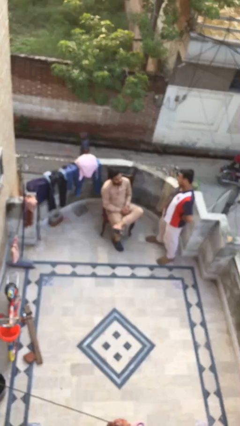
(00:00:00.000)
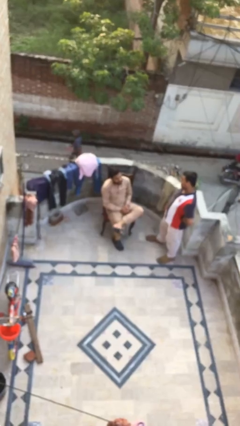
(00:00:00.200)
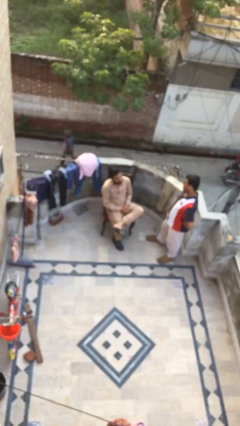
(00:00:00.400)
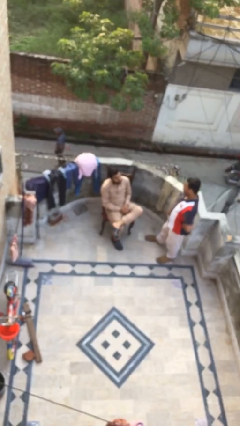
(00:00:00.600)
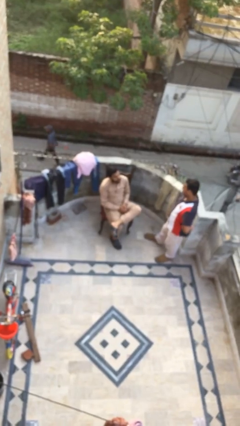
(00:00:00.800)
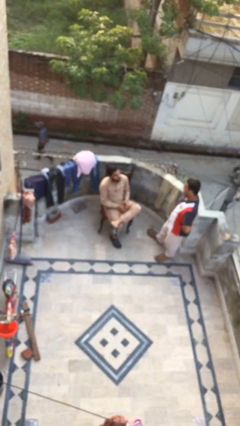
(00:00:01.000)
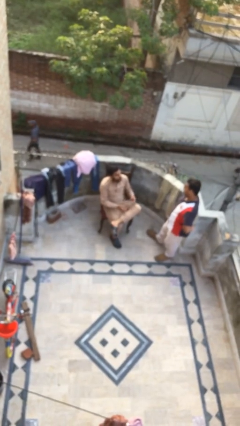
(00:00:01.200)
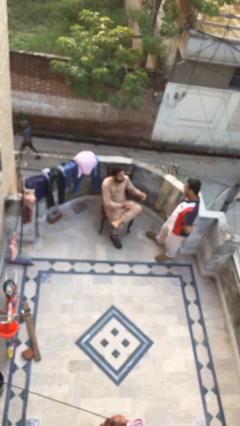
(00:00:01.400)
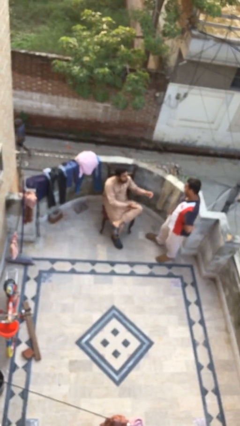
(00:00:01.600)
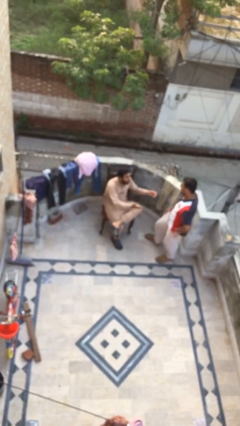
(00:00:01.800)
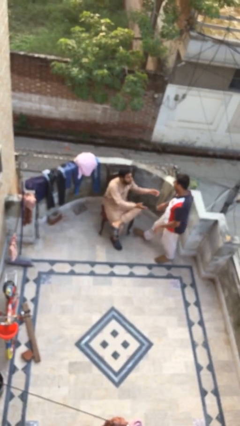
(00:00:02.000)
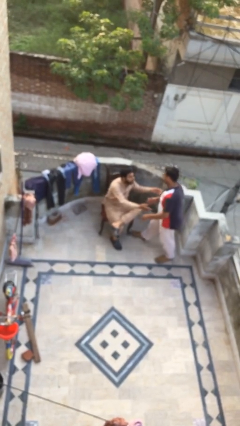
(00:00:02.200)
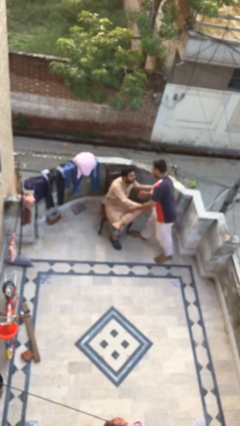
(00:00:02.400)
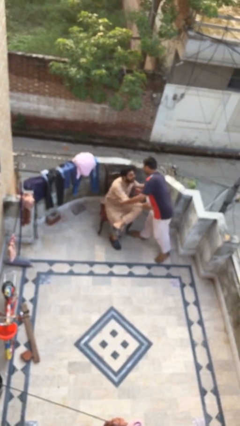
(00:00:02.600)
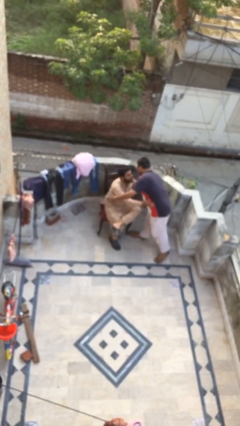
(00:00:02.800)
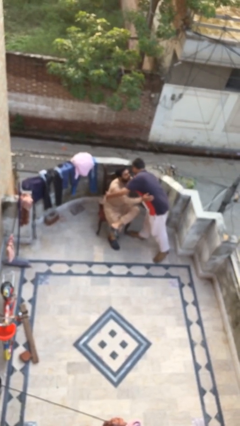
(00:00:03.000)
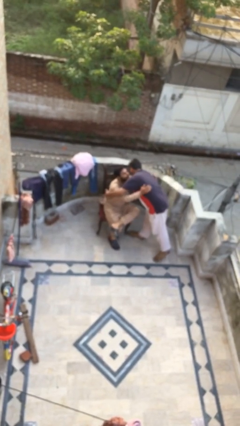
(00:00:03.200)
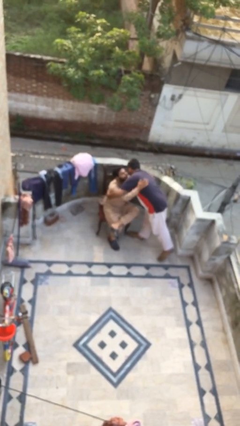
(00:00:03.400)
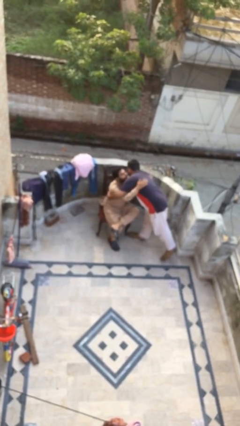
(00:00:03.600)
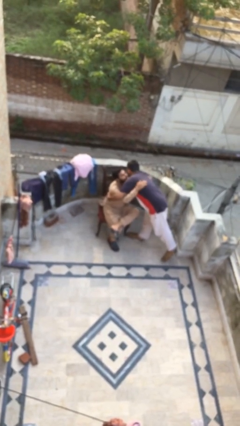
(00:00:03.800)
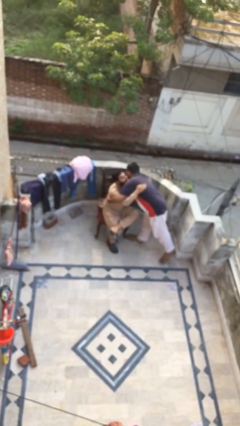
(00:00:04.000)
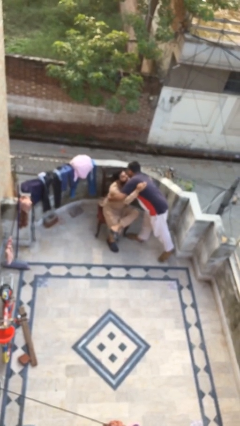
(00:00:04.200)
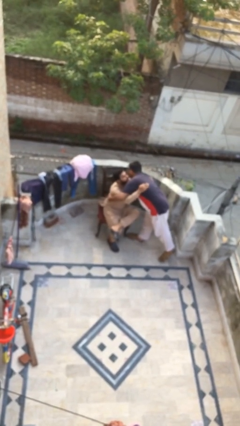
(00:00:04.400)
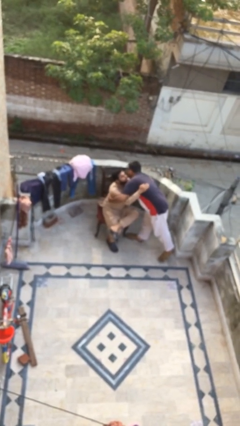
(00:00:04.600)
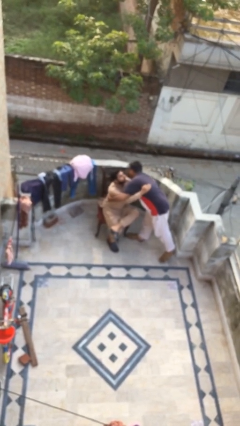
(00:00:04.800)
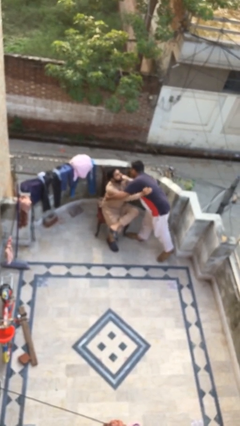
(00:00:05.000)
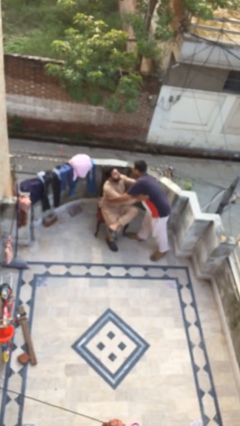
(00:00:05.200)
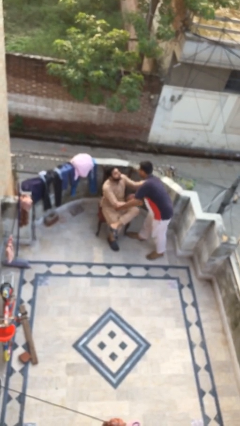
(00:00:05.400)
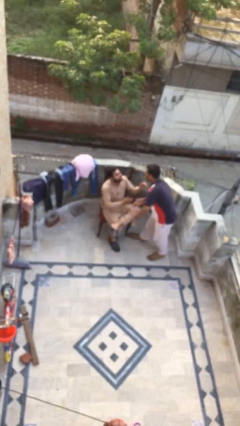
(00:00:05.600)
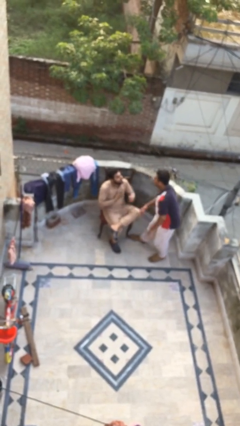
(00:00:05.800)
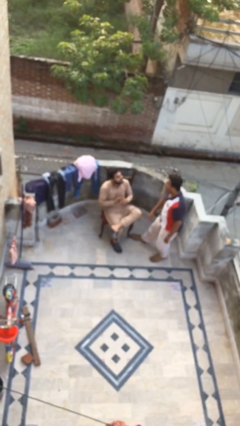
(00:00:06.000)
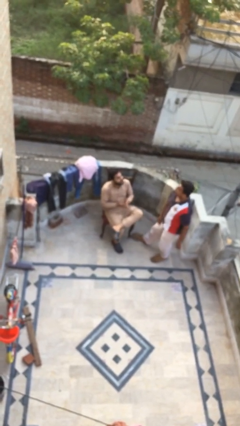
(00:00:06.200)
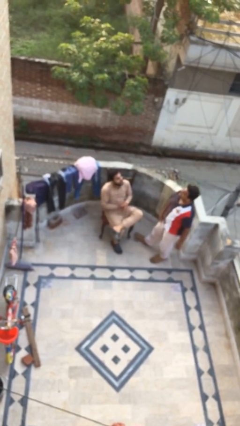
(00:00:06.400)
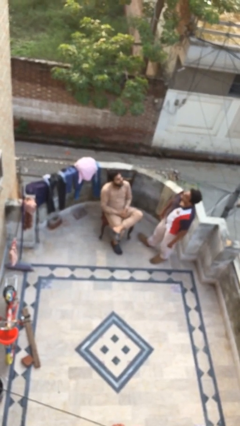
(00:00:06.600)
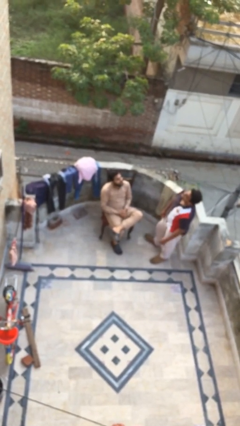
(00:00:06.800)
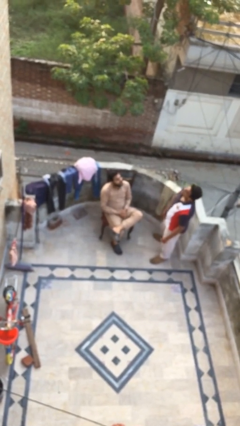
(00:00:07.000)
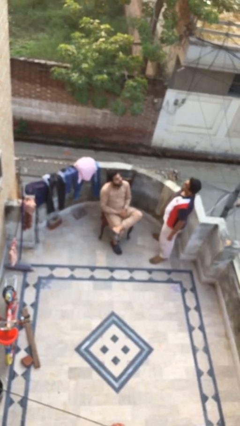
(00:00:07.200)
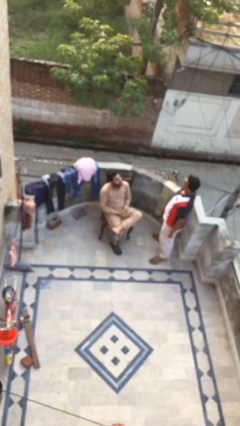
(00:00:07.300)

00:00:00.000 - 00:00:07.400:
person embraces person

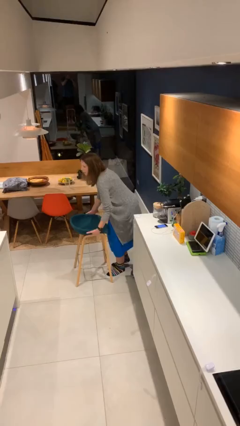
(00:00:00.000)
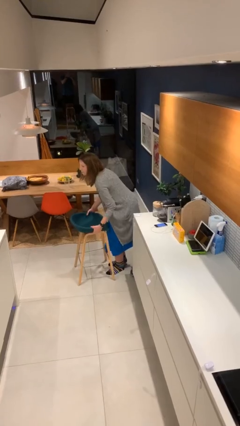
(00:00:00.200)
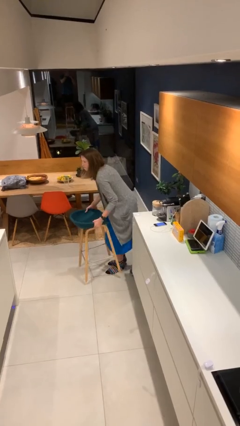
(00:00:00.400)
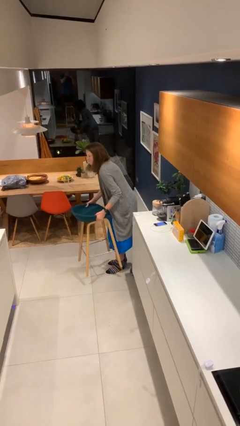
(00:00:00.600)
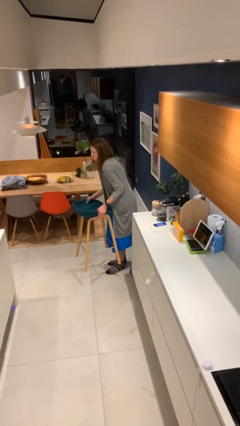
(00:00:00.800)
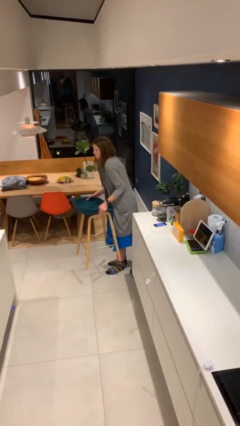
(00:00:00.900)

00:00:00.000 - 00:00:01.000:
person picks up object from floor

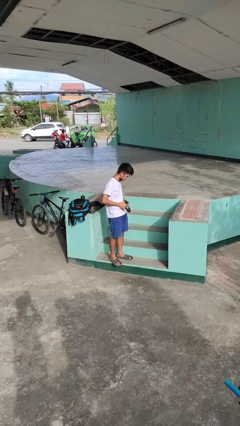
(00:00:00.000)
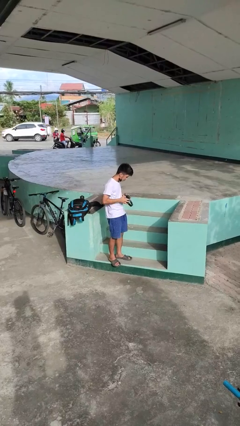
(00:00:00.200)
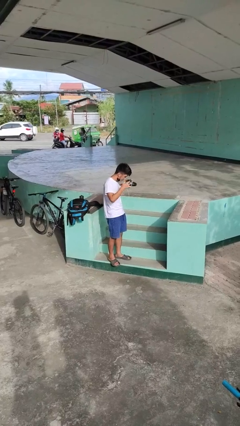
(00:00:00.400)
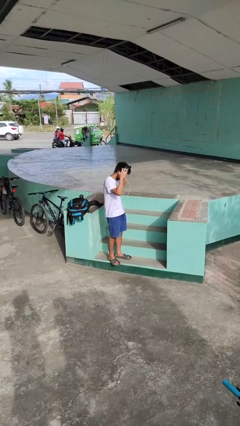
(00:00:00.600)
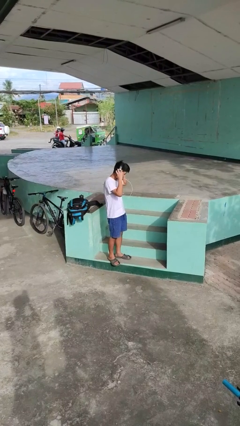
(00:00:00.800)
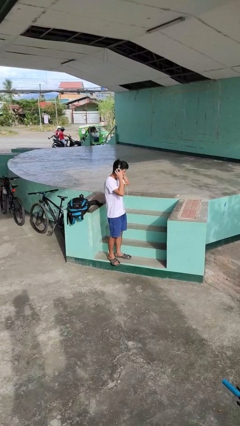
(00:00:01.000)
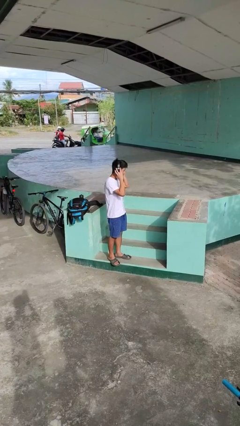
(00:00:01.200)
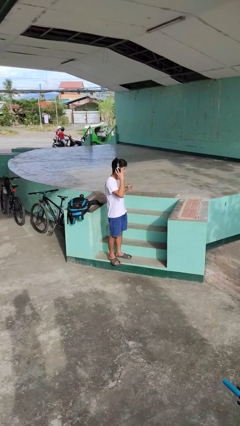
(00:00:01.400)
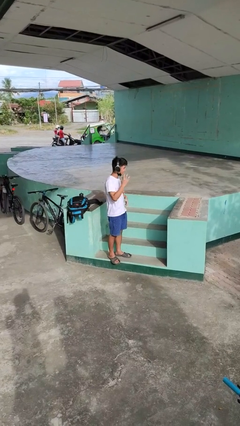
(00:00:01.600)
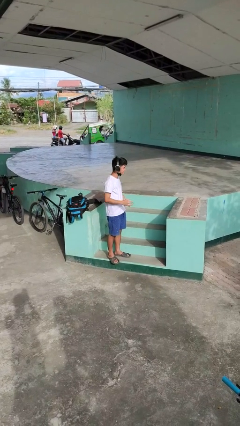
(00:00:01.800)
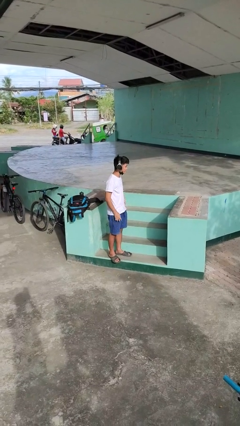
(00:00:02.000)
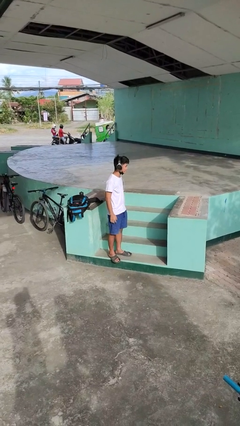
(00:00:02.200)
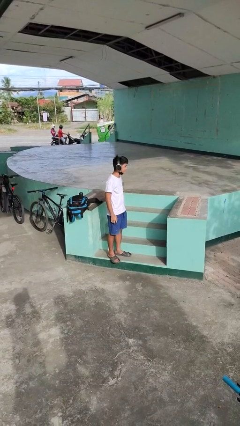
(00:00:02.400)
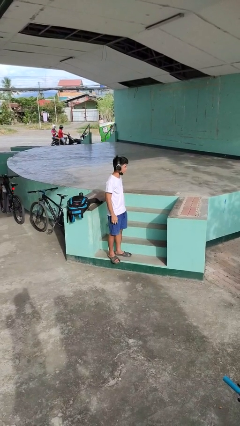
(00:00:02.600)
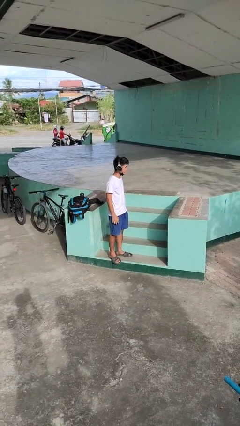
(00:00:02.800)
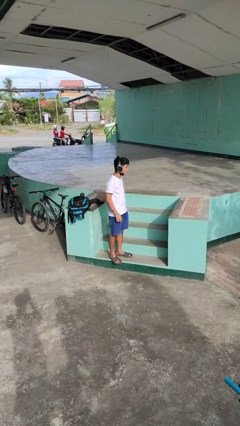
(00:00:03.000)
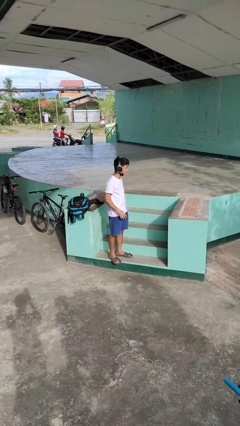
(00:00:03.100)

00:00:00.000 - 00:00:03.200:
person puts on headphones

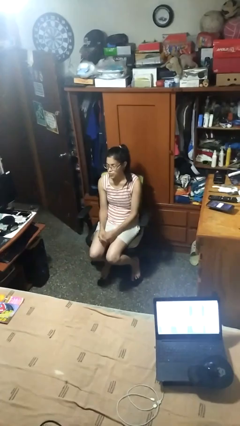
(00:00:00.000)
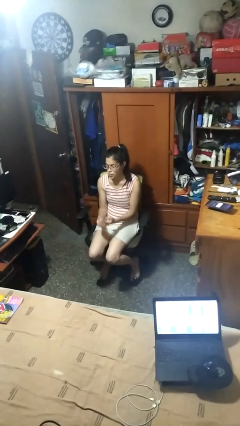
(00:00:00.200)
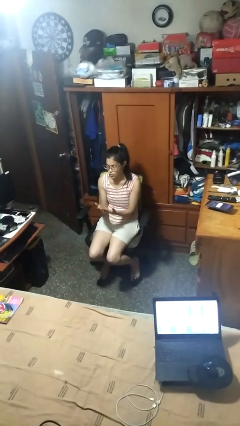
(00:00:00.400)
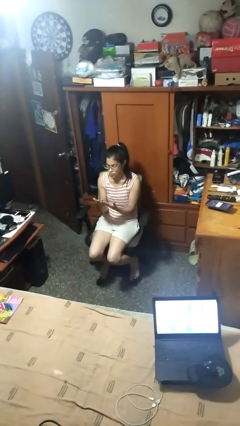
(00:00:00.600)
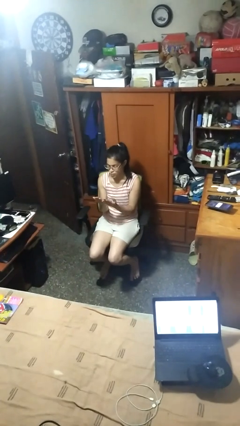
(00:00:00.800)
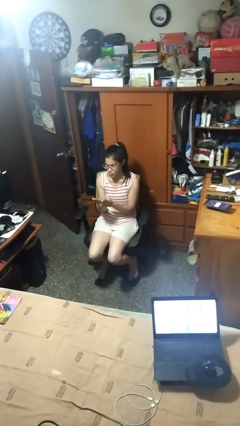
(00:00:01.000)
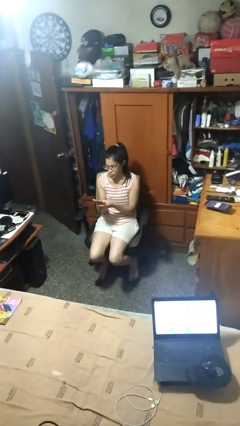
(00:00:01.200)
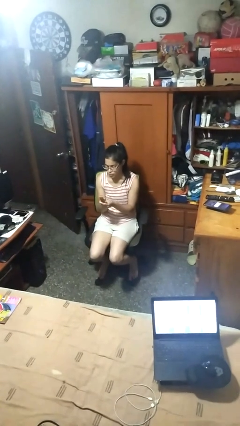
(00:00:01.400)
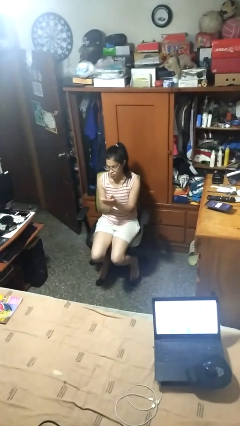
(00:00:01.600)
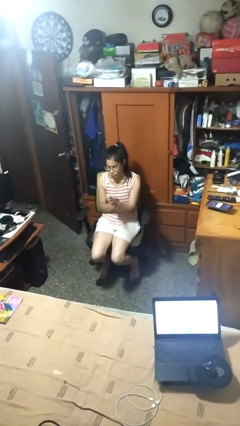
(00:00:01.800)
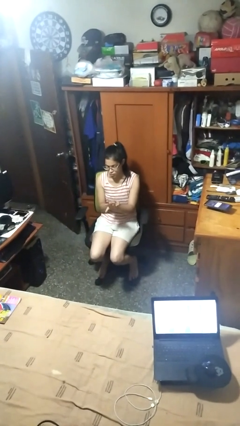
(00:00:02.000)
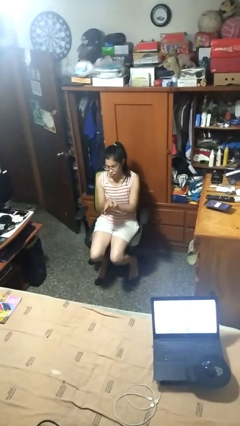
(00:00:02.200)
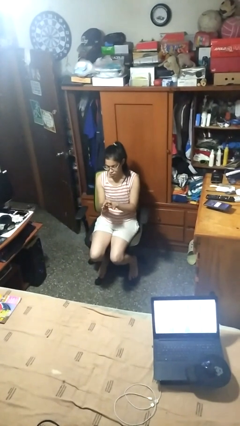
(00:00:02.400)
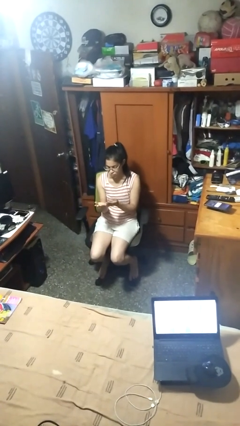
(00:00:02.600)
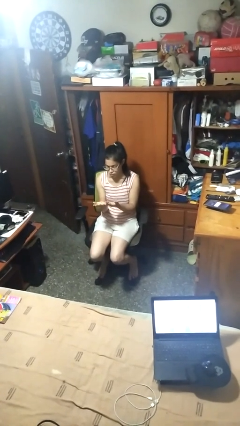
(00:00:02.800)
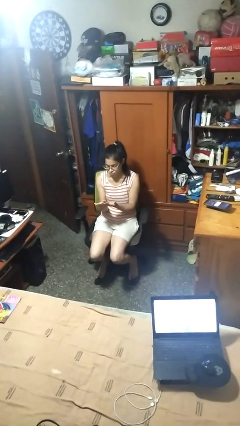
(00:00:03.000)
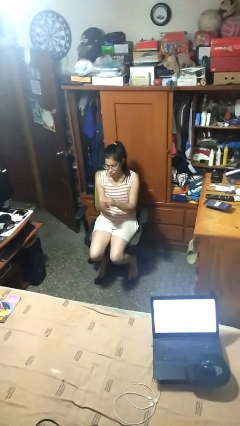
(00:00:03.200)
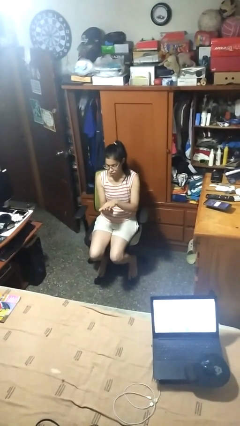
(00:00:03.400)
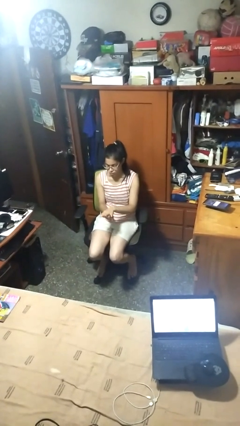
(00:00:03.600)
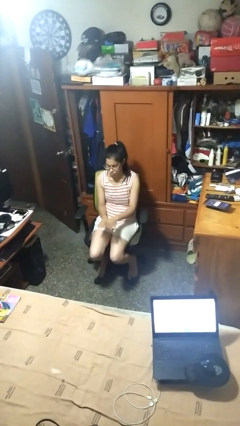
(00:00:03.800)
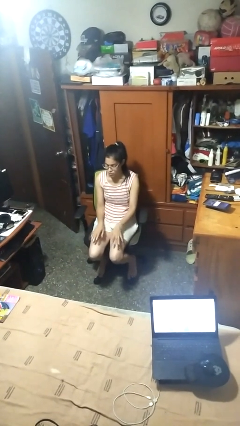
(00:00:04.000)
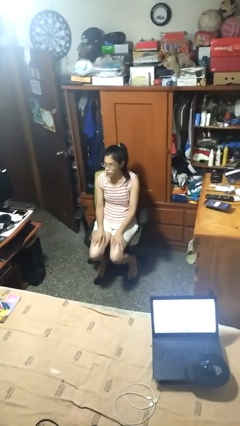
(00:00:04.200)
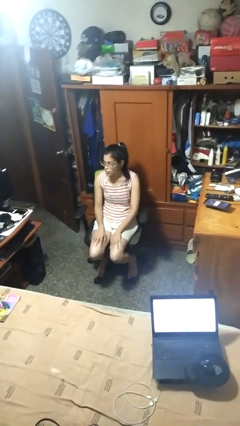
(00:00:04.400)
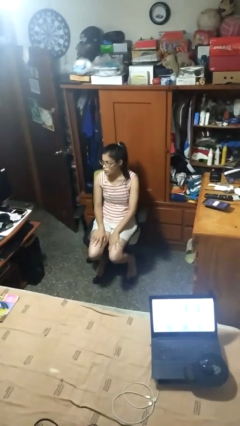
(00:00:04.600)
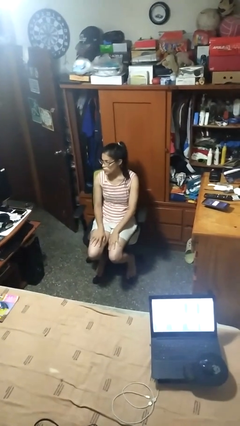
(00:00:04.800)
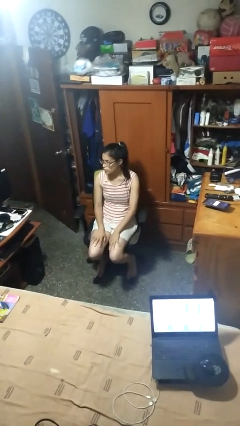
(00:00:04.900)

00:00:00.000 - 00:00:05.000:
person looks at hands in lap

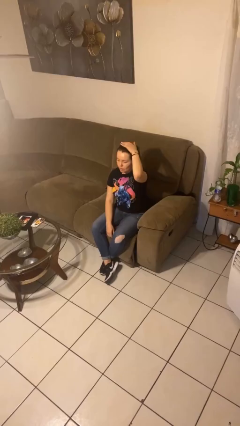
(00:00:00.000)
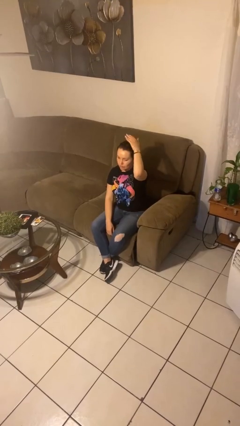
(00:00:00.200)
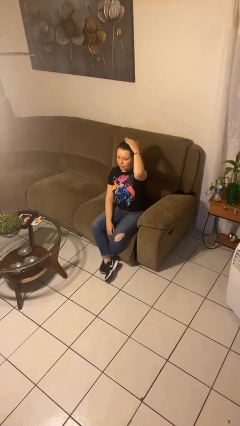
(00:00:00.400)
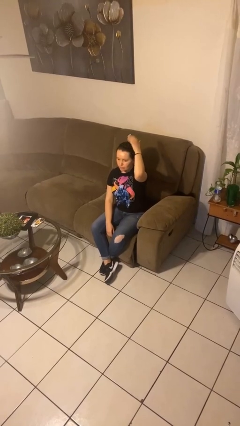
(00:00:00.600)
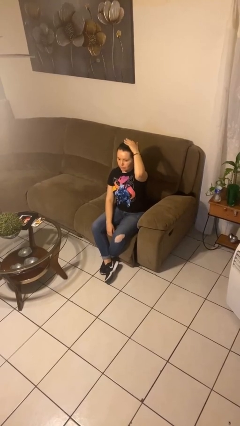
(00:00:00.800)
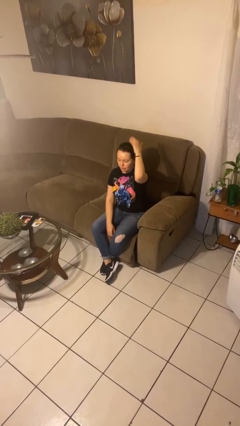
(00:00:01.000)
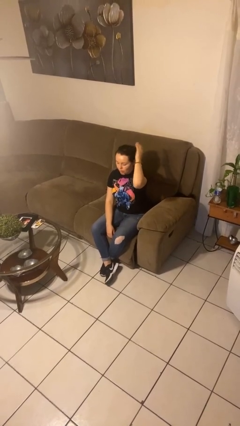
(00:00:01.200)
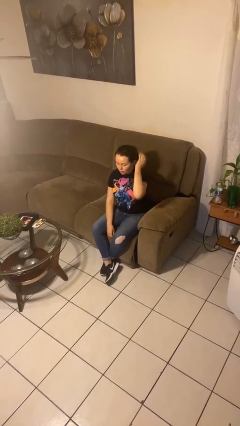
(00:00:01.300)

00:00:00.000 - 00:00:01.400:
person pats head
